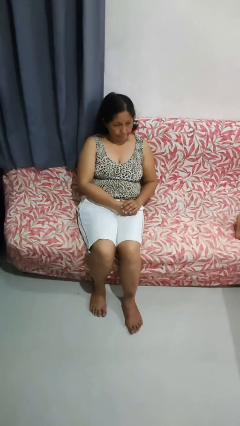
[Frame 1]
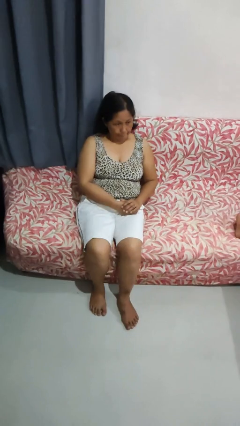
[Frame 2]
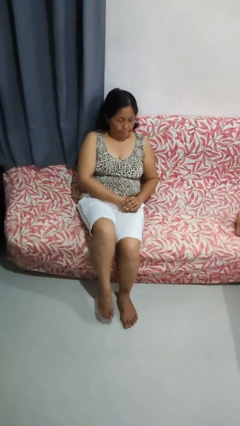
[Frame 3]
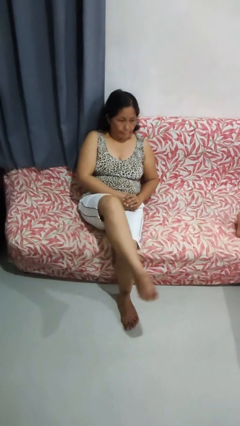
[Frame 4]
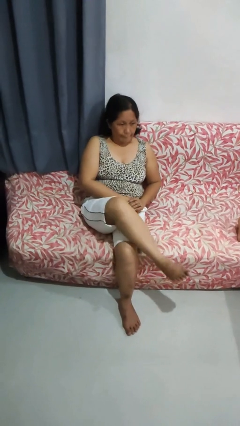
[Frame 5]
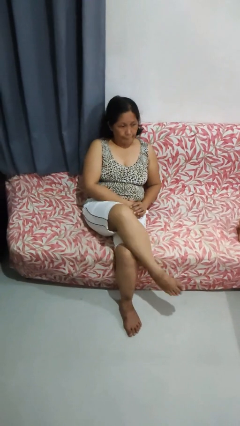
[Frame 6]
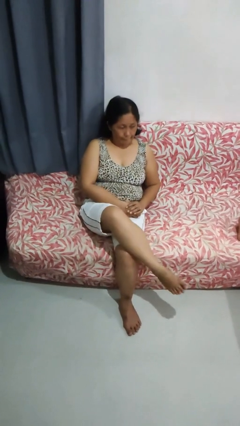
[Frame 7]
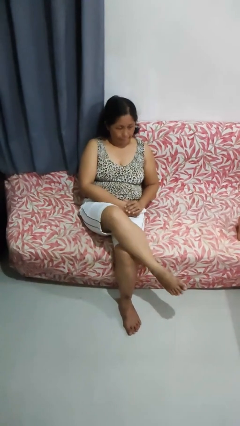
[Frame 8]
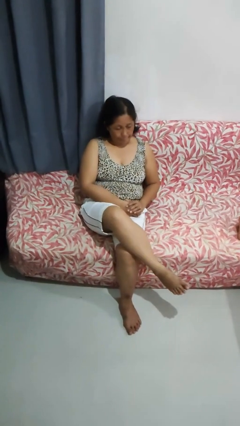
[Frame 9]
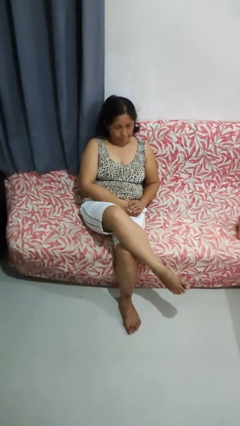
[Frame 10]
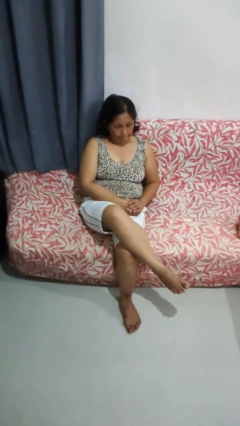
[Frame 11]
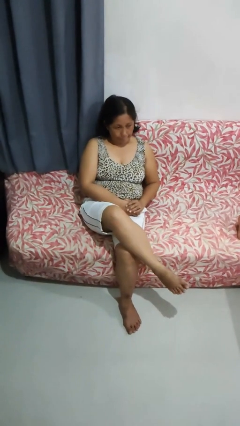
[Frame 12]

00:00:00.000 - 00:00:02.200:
person crosses legs

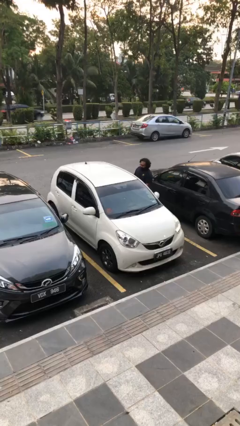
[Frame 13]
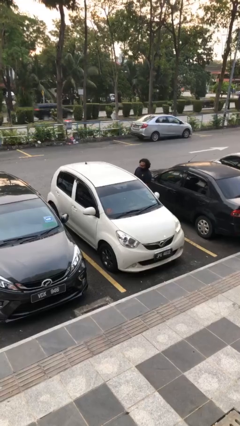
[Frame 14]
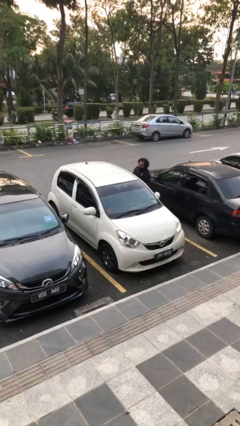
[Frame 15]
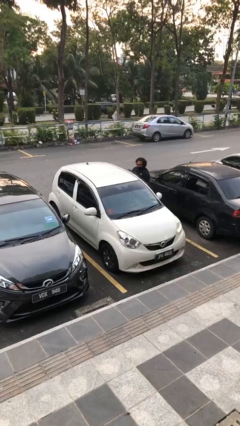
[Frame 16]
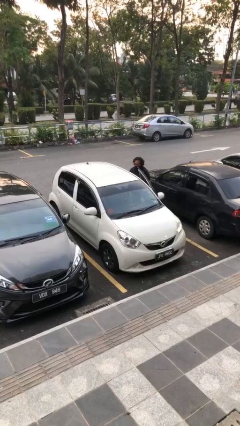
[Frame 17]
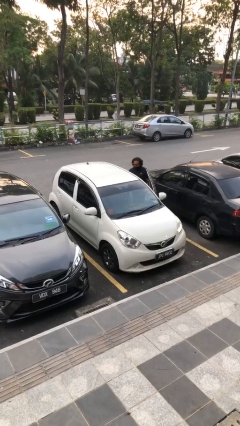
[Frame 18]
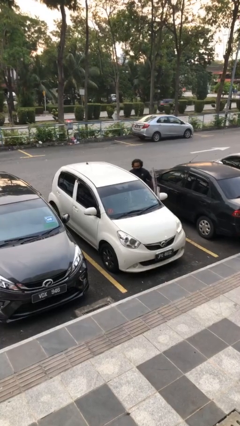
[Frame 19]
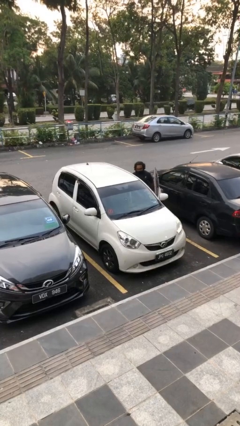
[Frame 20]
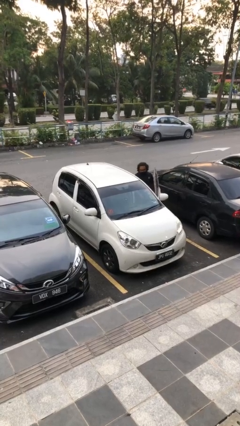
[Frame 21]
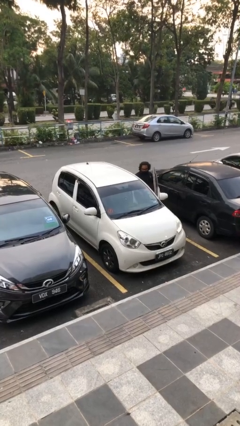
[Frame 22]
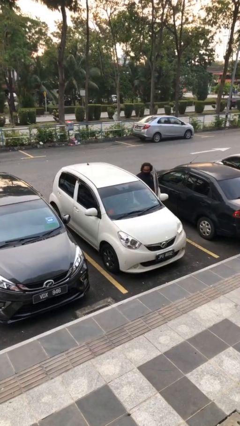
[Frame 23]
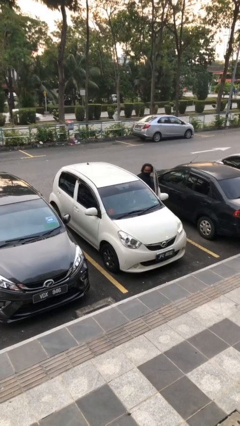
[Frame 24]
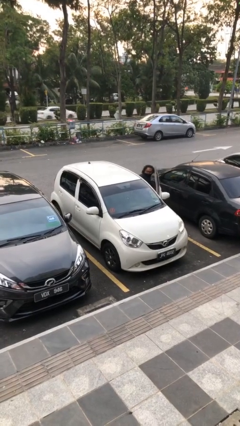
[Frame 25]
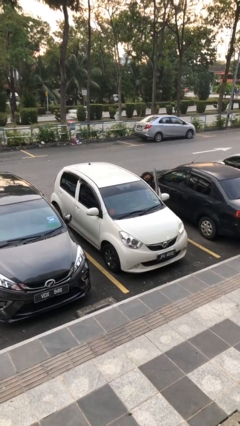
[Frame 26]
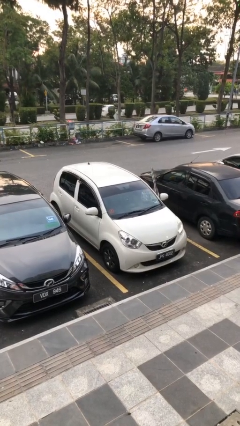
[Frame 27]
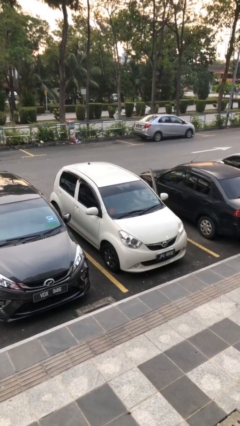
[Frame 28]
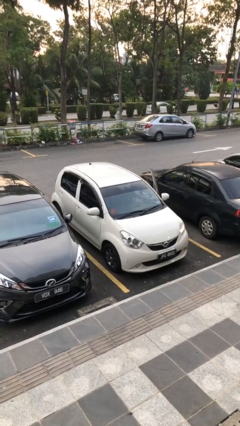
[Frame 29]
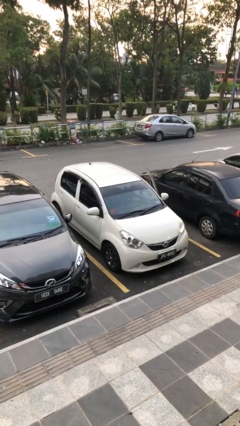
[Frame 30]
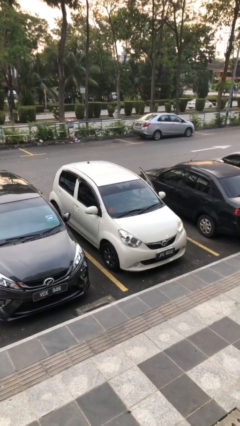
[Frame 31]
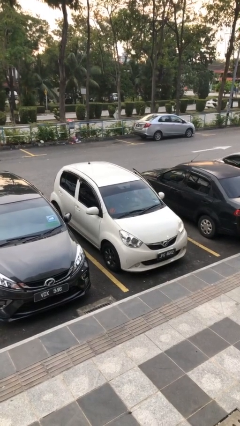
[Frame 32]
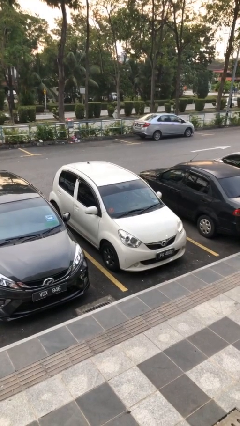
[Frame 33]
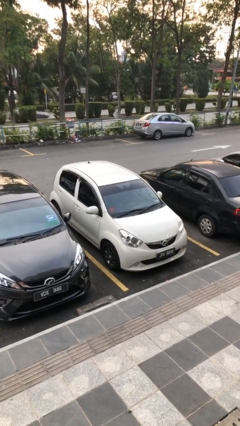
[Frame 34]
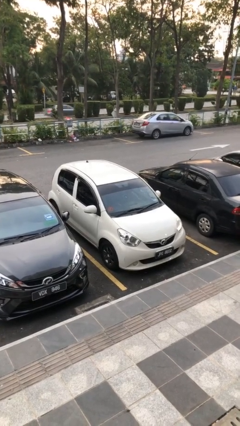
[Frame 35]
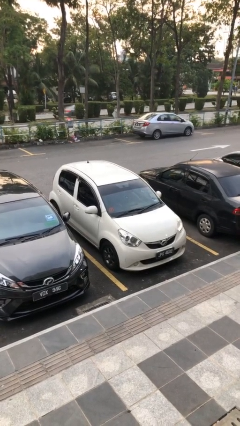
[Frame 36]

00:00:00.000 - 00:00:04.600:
car picks up person

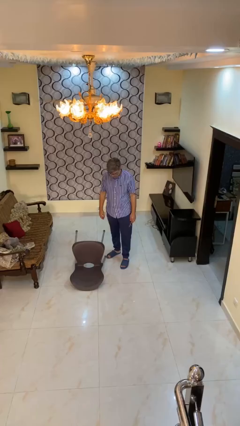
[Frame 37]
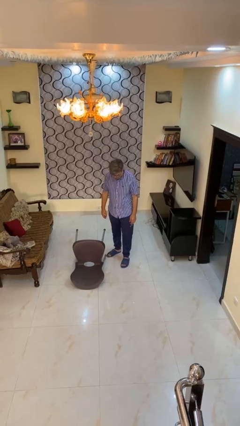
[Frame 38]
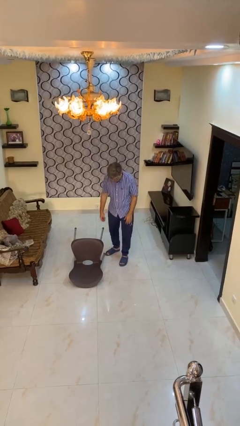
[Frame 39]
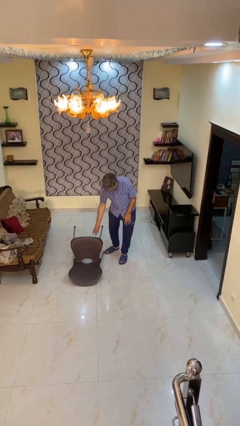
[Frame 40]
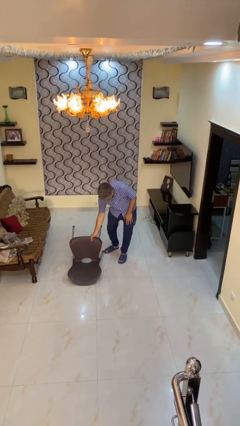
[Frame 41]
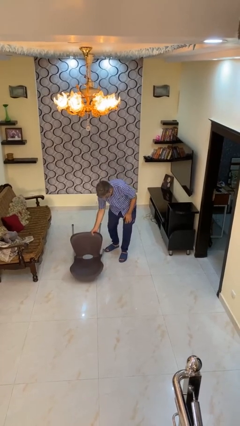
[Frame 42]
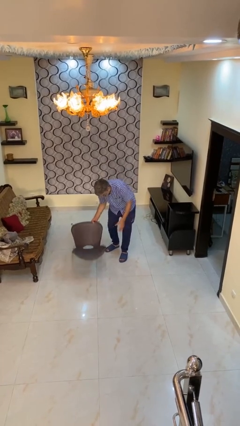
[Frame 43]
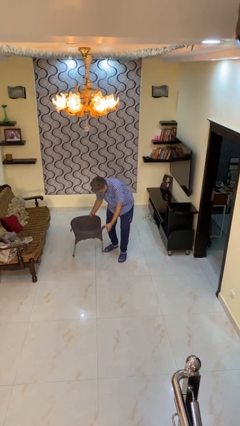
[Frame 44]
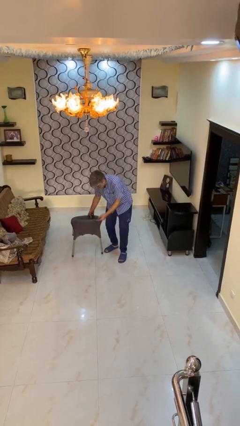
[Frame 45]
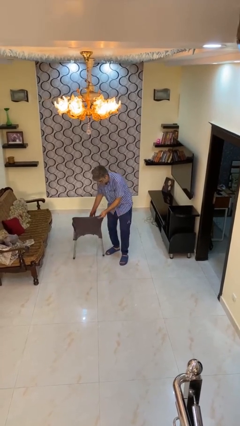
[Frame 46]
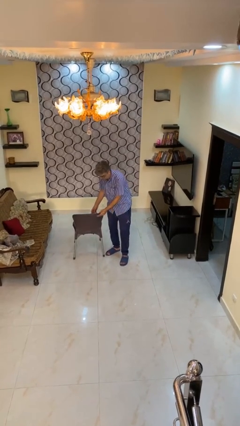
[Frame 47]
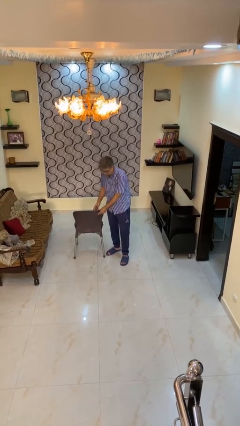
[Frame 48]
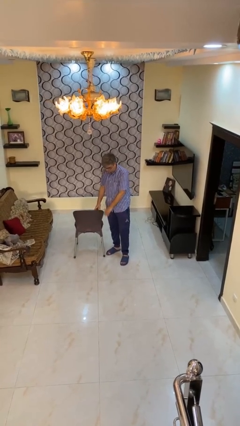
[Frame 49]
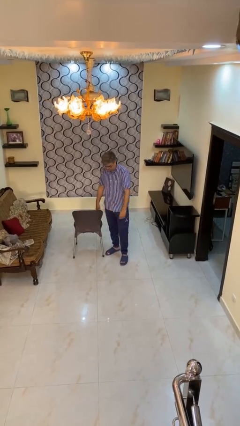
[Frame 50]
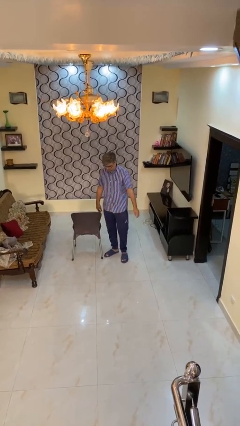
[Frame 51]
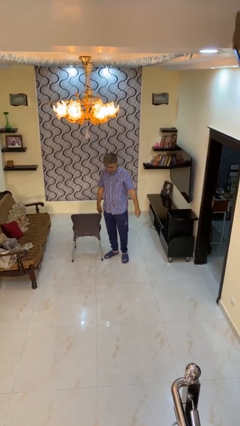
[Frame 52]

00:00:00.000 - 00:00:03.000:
person sets upright furniture

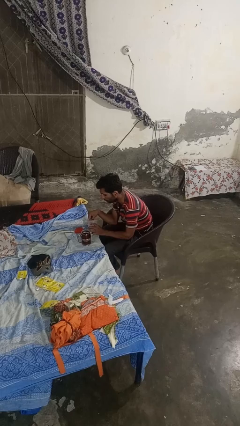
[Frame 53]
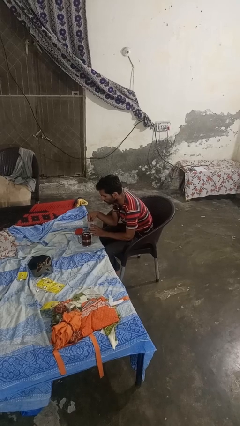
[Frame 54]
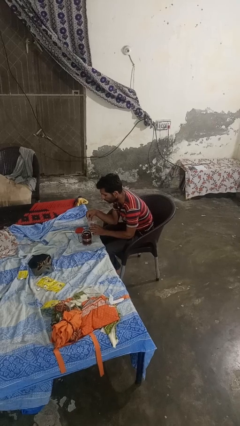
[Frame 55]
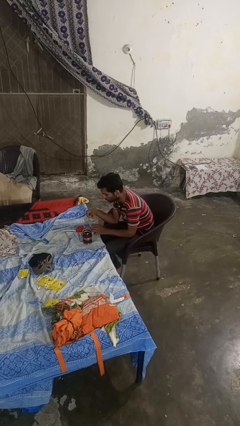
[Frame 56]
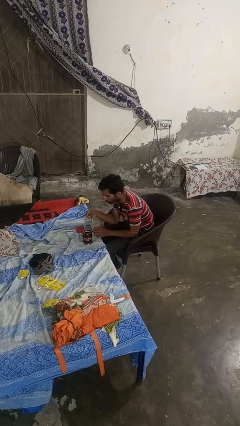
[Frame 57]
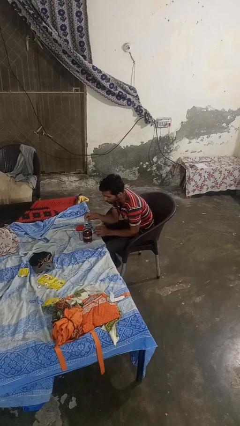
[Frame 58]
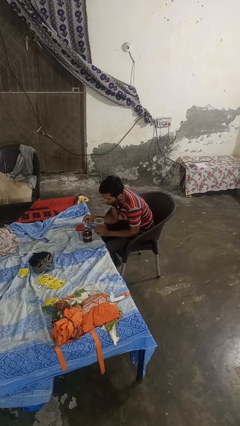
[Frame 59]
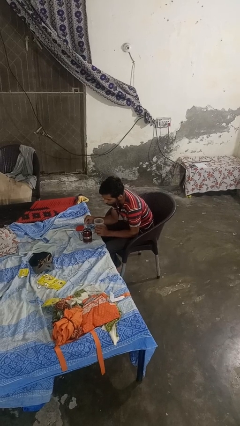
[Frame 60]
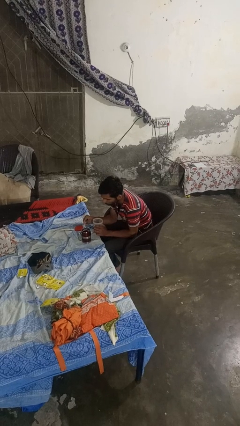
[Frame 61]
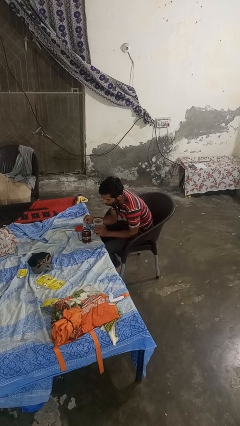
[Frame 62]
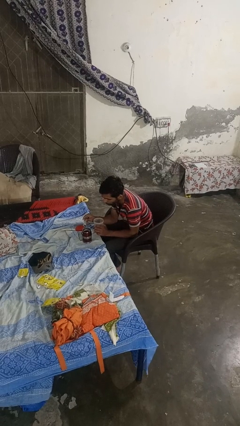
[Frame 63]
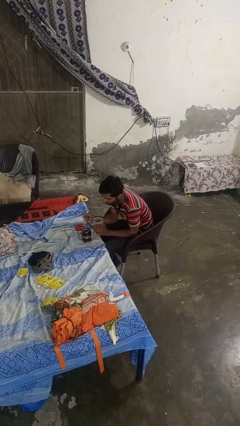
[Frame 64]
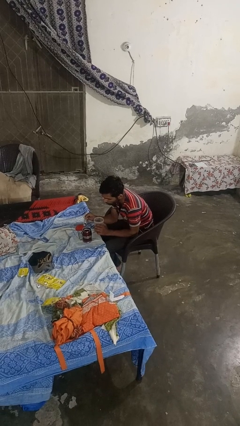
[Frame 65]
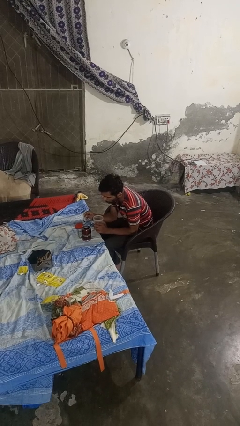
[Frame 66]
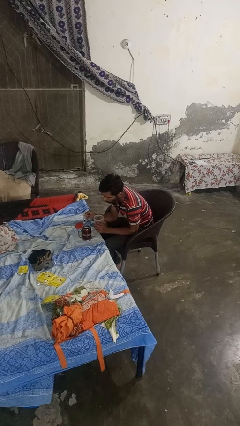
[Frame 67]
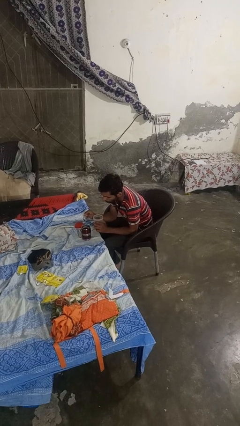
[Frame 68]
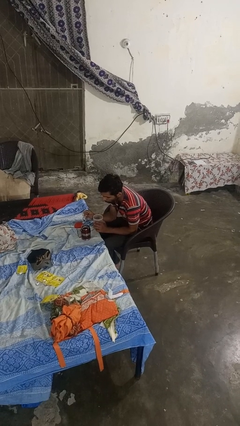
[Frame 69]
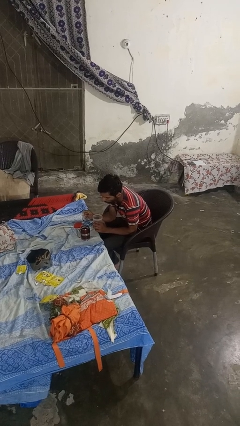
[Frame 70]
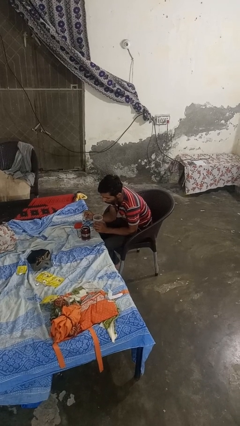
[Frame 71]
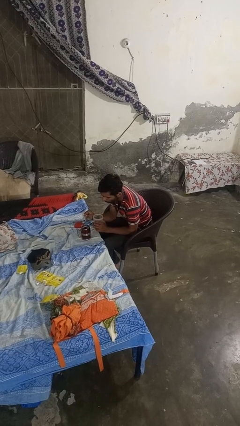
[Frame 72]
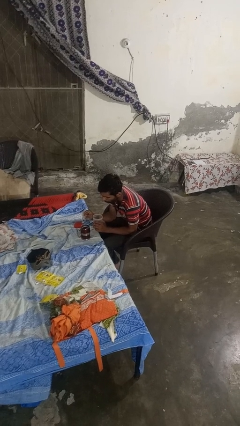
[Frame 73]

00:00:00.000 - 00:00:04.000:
person pours coffee into mug

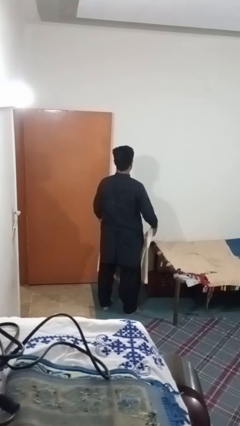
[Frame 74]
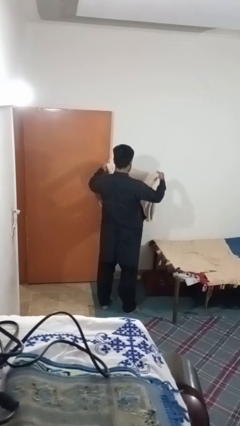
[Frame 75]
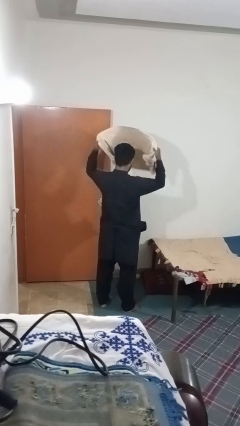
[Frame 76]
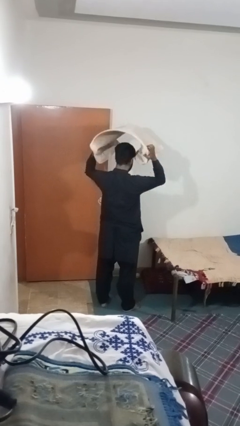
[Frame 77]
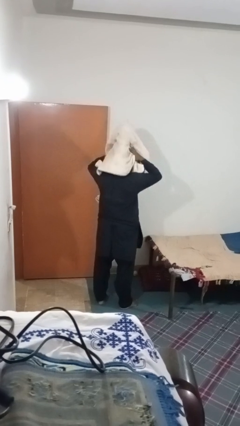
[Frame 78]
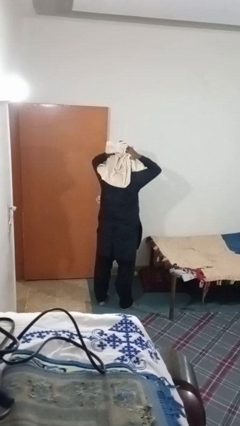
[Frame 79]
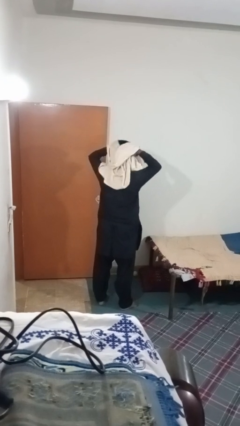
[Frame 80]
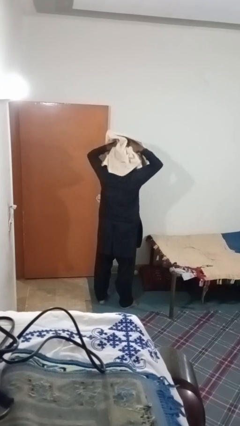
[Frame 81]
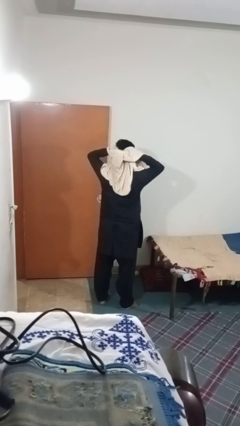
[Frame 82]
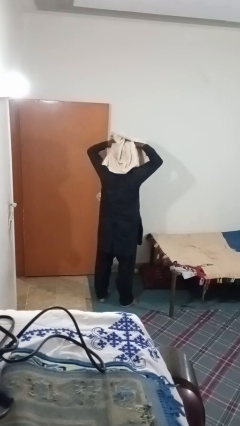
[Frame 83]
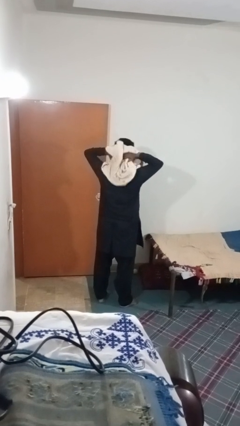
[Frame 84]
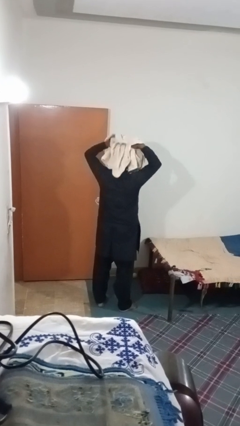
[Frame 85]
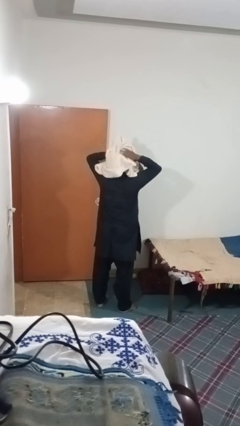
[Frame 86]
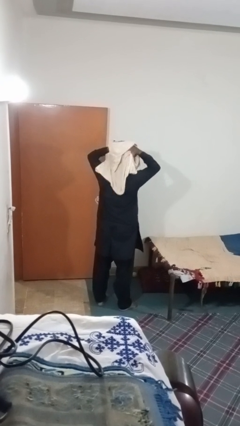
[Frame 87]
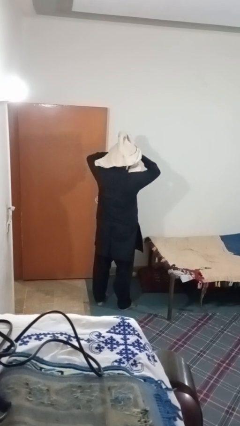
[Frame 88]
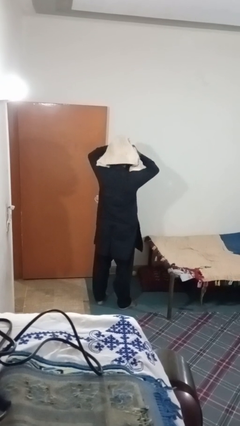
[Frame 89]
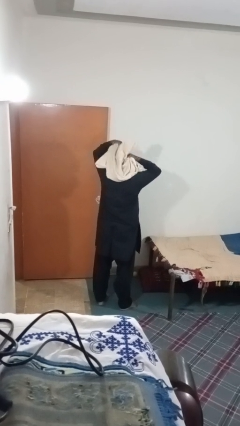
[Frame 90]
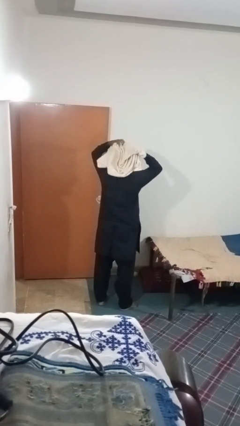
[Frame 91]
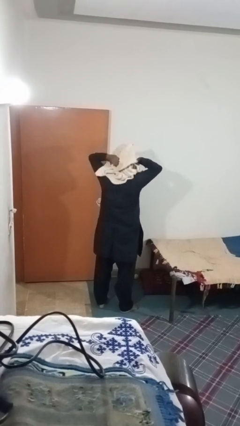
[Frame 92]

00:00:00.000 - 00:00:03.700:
person dries hair with towel
